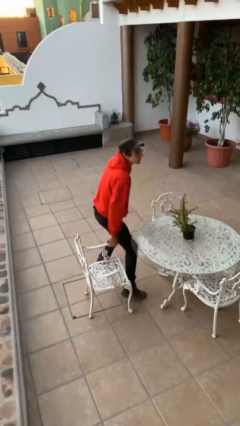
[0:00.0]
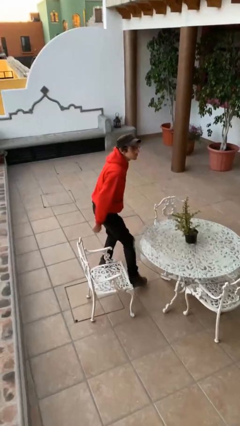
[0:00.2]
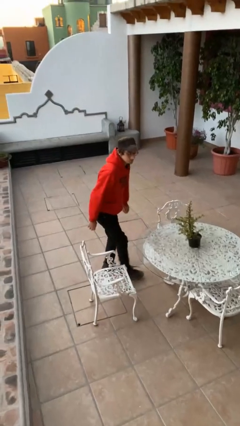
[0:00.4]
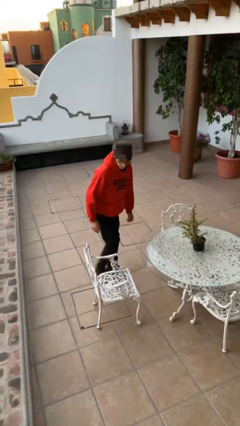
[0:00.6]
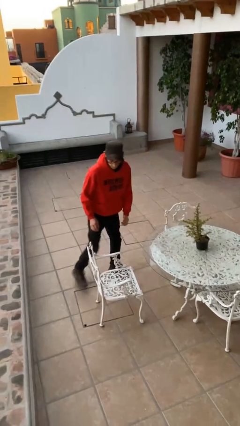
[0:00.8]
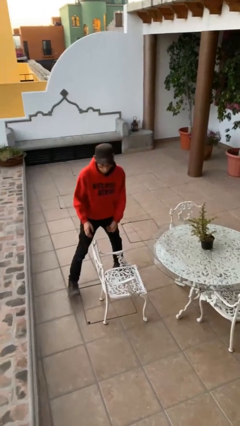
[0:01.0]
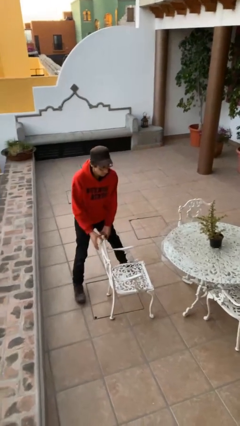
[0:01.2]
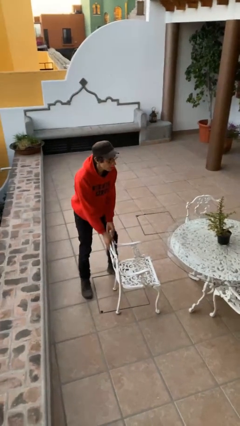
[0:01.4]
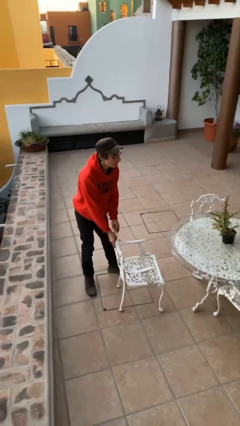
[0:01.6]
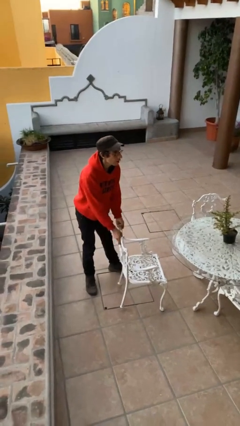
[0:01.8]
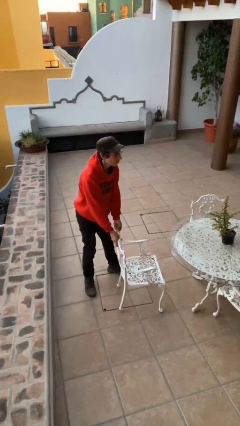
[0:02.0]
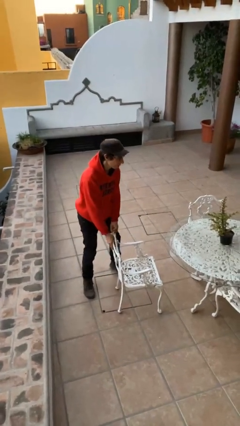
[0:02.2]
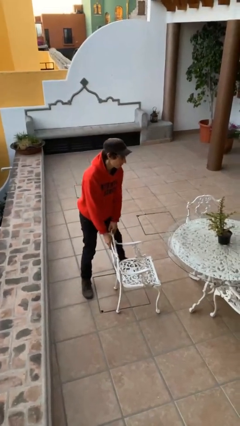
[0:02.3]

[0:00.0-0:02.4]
person stands up

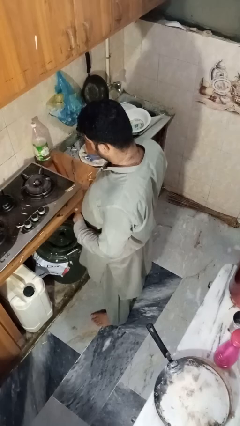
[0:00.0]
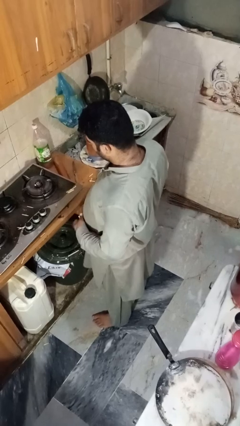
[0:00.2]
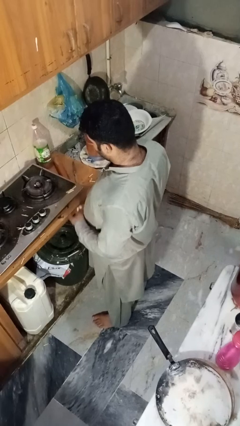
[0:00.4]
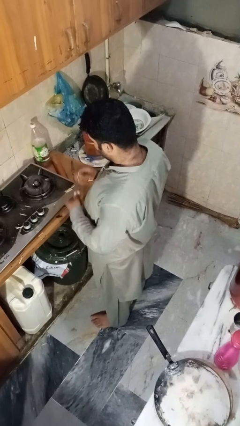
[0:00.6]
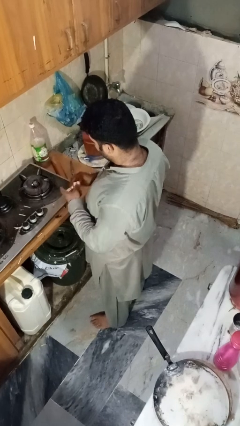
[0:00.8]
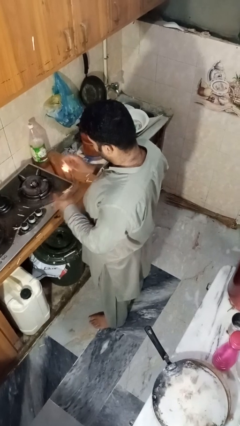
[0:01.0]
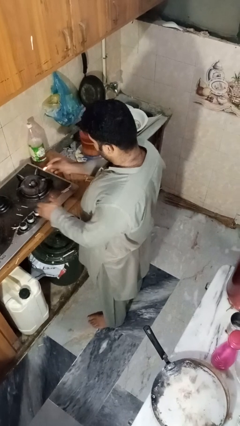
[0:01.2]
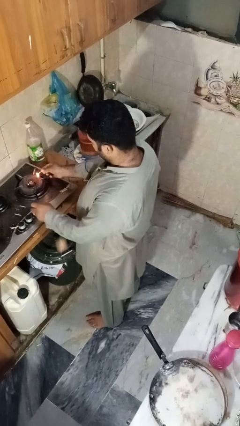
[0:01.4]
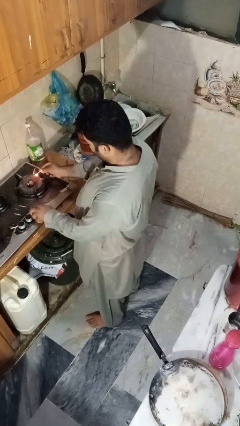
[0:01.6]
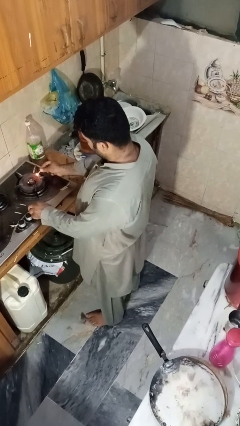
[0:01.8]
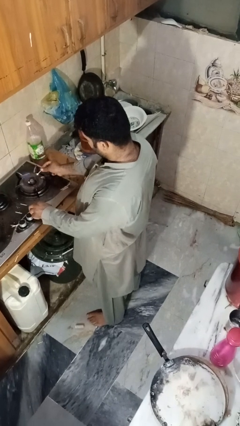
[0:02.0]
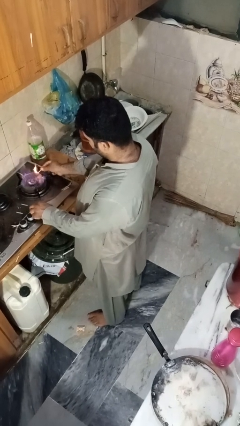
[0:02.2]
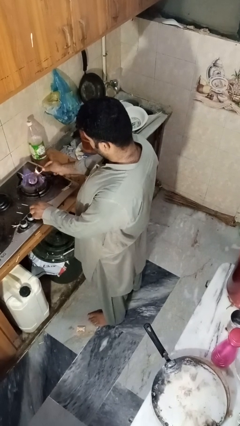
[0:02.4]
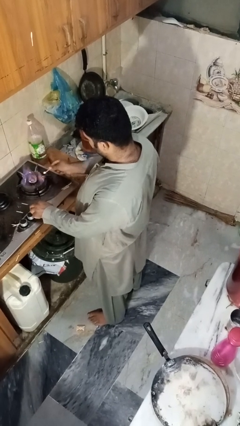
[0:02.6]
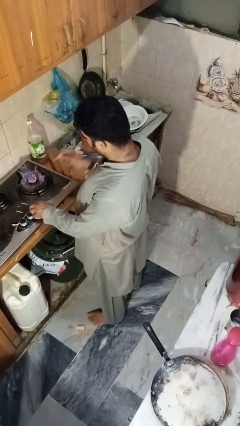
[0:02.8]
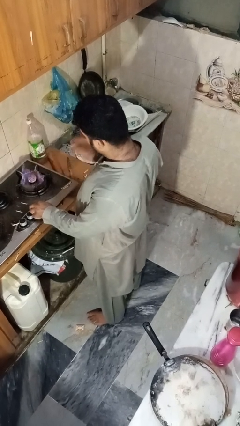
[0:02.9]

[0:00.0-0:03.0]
person turns on stovetop

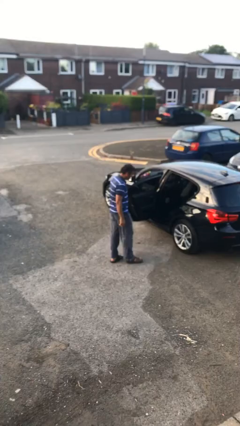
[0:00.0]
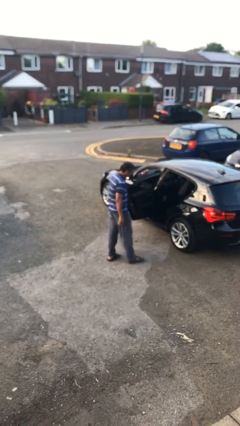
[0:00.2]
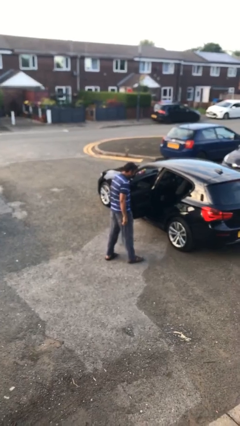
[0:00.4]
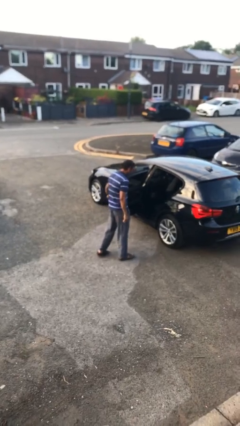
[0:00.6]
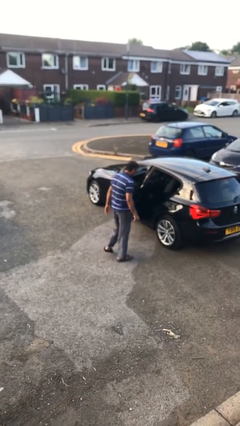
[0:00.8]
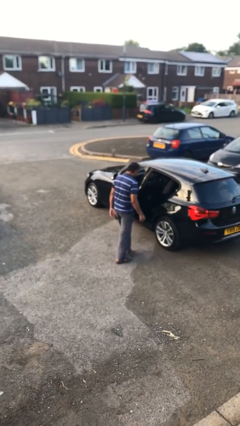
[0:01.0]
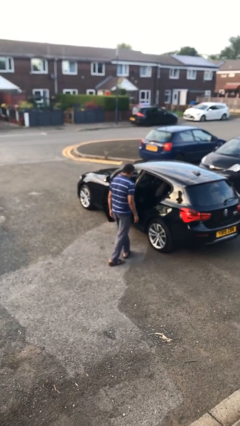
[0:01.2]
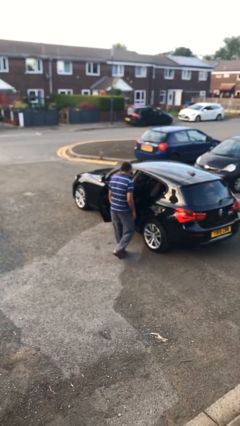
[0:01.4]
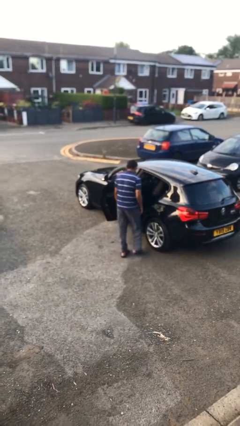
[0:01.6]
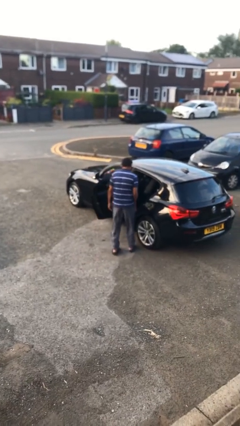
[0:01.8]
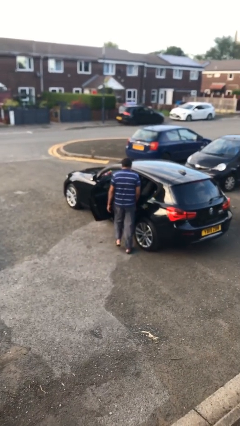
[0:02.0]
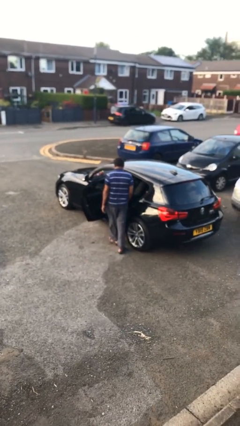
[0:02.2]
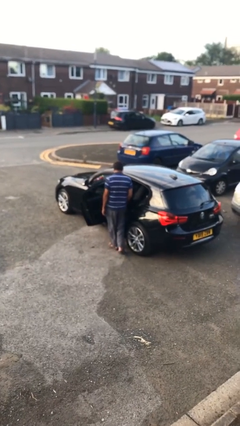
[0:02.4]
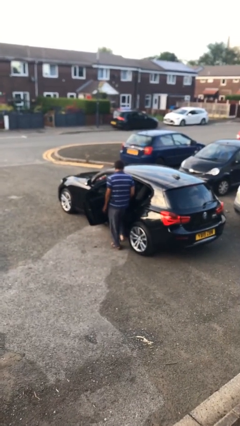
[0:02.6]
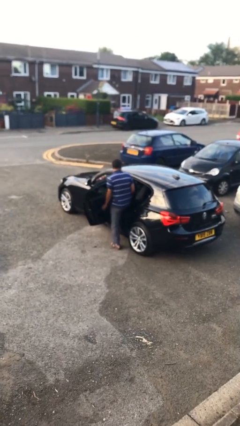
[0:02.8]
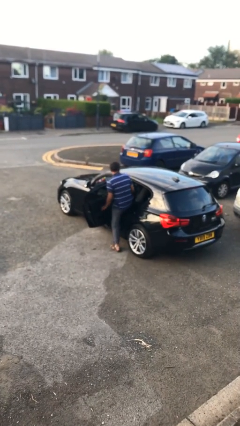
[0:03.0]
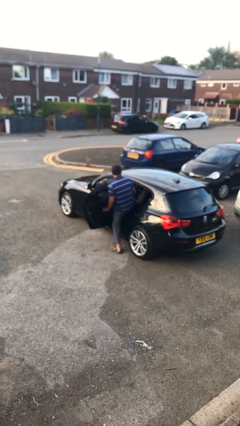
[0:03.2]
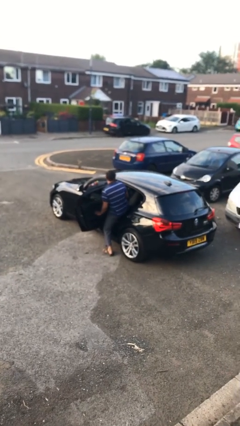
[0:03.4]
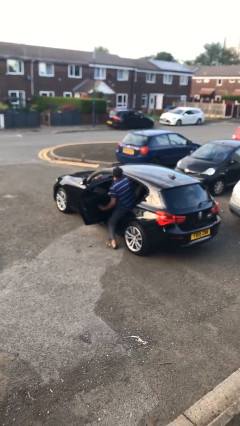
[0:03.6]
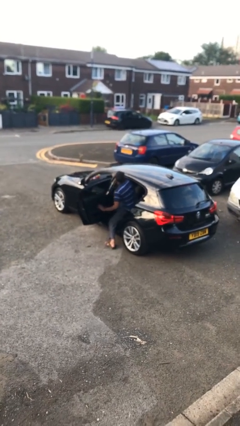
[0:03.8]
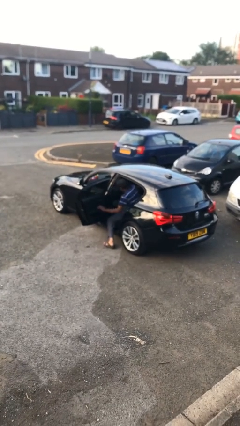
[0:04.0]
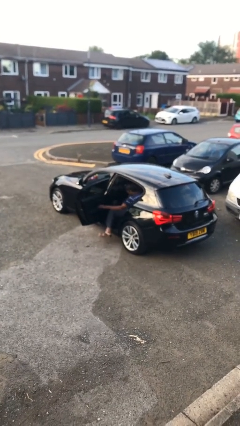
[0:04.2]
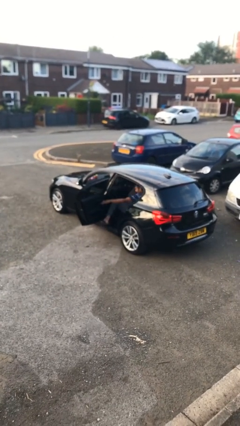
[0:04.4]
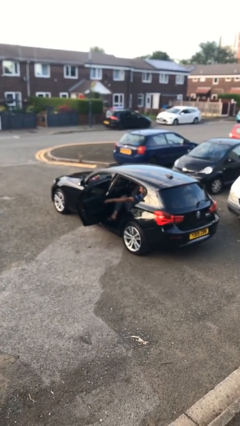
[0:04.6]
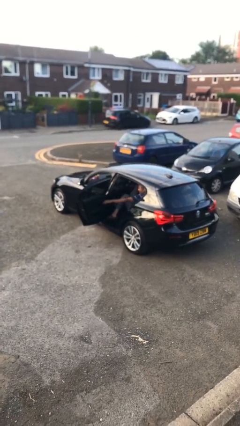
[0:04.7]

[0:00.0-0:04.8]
person enters car

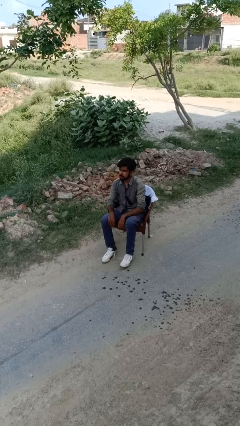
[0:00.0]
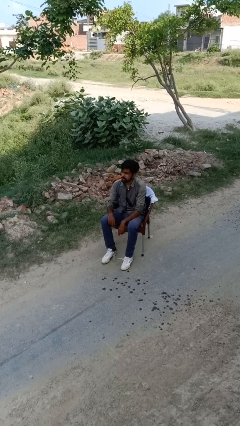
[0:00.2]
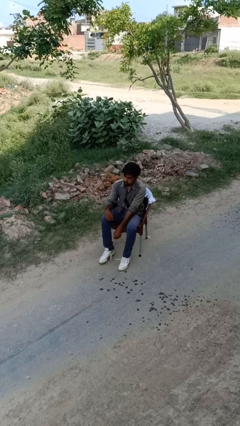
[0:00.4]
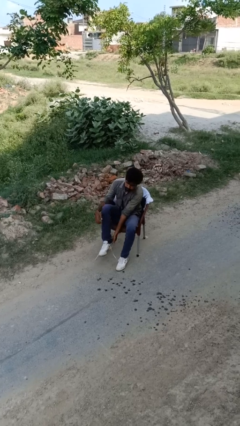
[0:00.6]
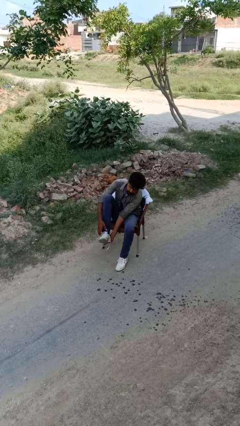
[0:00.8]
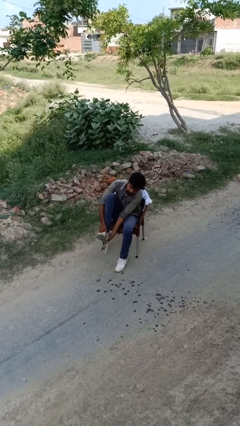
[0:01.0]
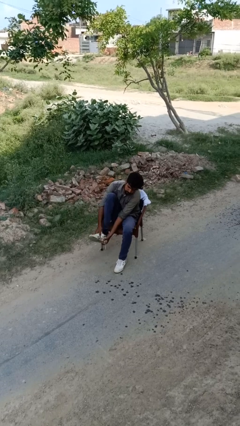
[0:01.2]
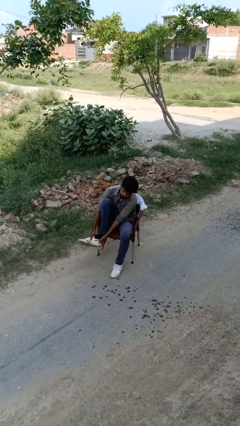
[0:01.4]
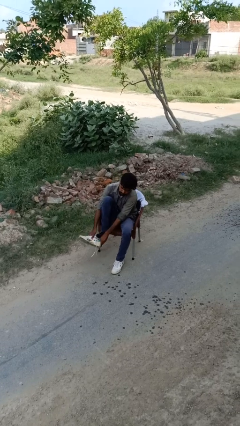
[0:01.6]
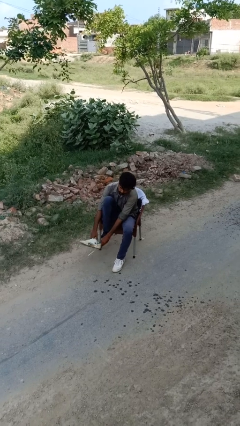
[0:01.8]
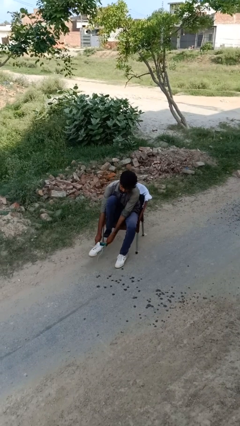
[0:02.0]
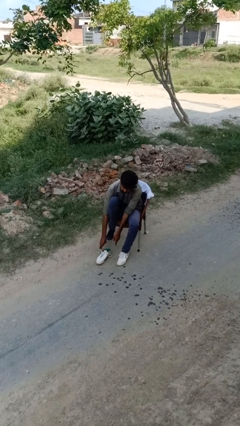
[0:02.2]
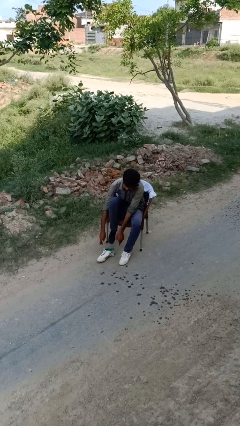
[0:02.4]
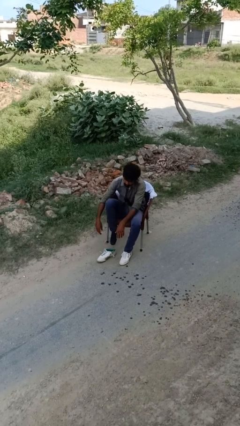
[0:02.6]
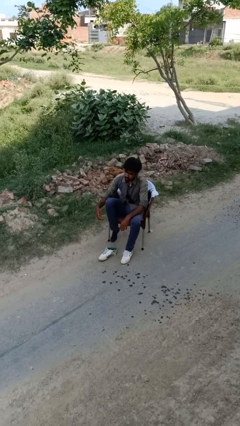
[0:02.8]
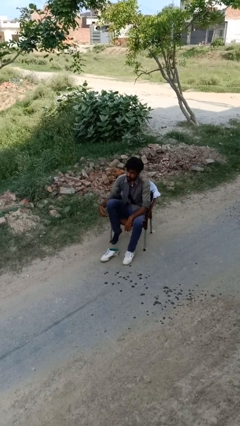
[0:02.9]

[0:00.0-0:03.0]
person takes off shoes

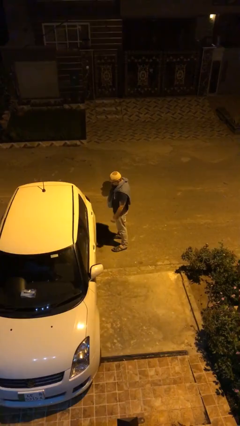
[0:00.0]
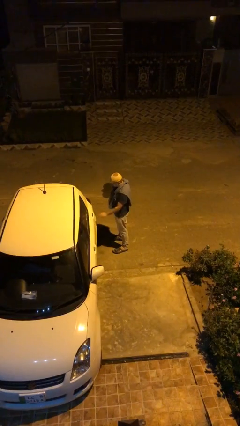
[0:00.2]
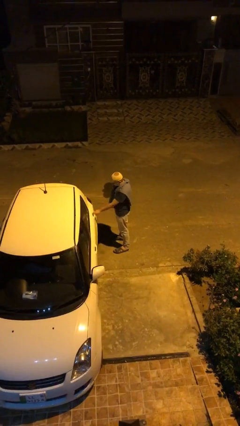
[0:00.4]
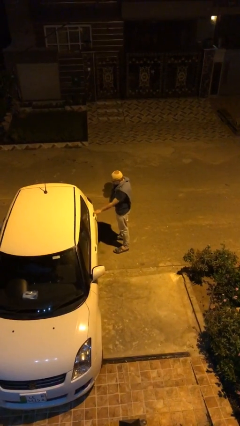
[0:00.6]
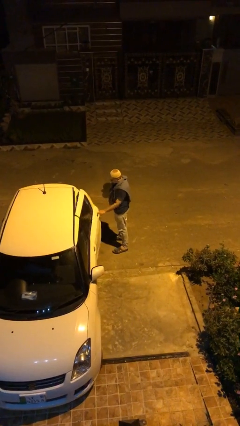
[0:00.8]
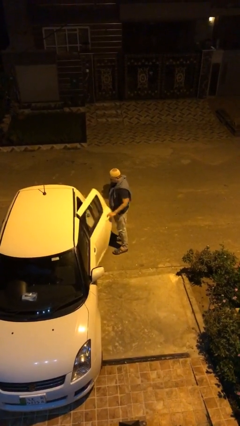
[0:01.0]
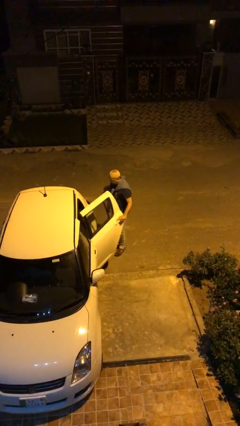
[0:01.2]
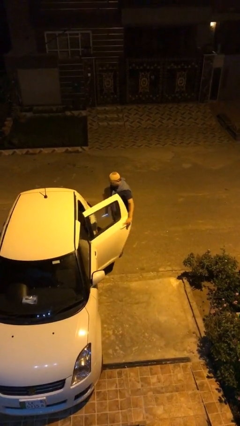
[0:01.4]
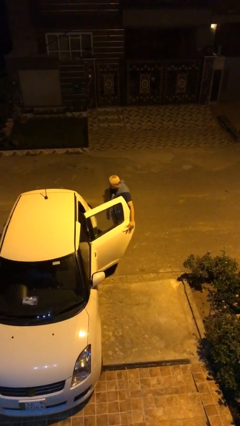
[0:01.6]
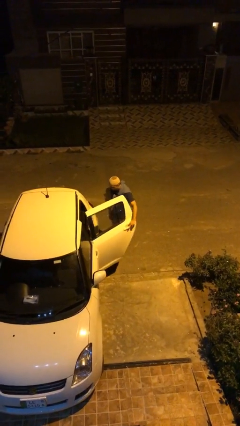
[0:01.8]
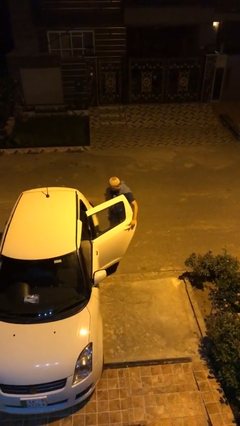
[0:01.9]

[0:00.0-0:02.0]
person opens car door

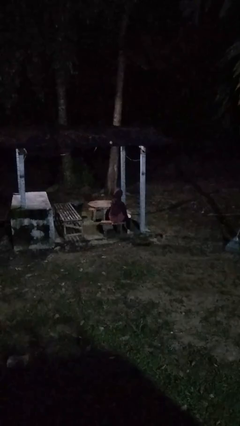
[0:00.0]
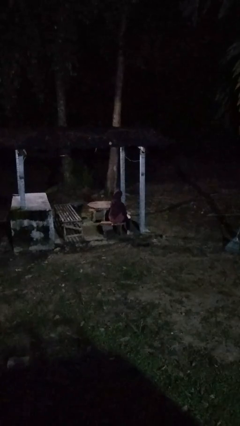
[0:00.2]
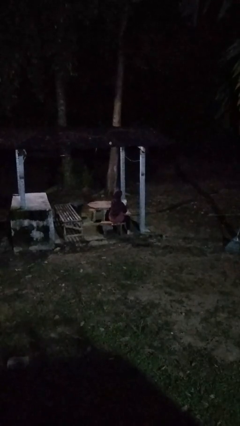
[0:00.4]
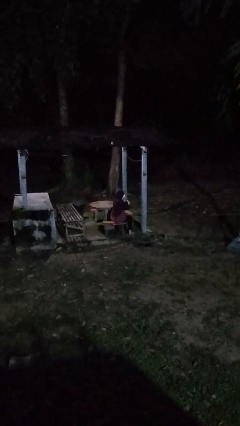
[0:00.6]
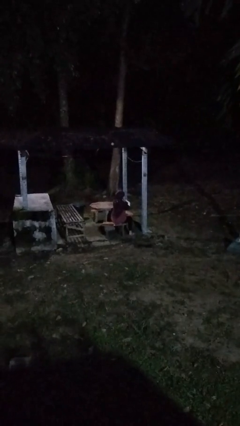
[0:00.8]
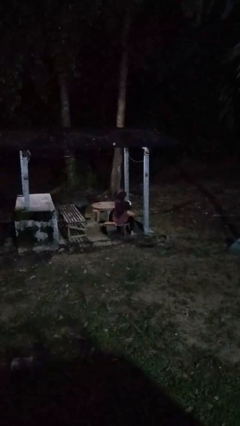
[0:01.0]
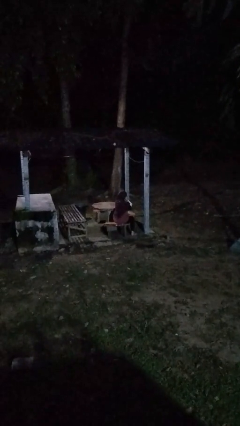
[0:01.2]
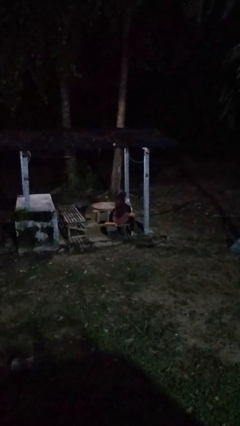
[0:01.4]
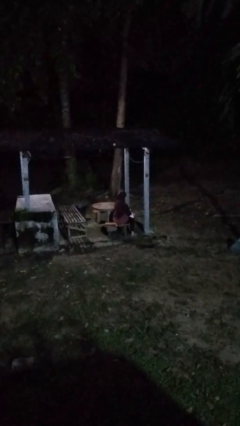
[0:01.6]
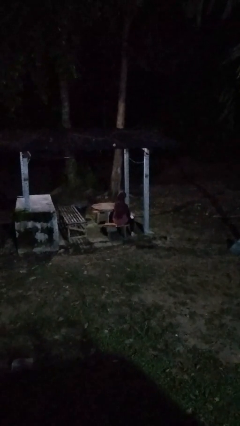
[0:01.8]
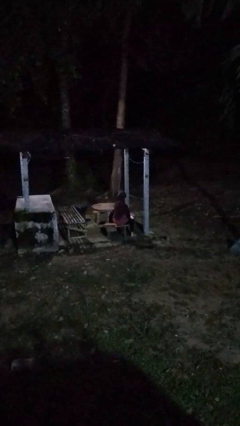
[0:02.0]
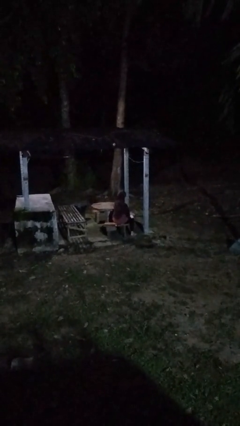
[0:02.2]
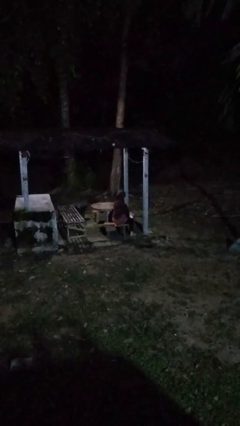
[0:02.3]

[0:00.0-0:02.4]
person blows nose
